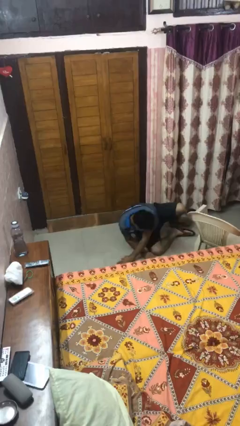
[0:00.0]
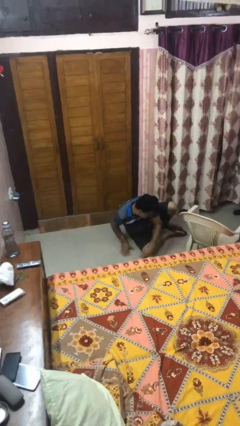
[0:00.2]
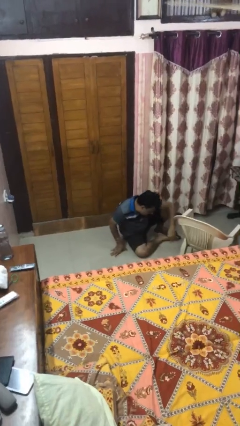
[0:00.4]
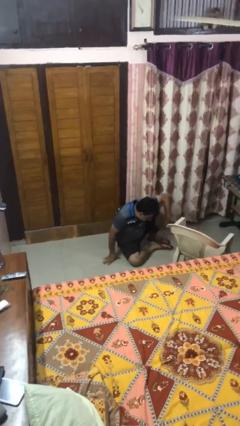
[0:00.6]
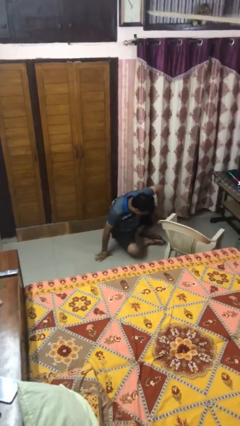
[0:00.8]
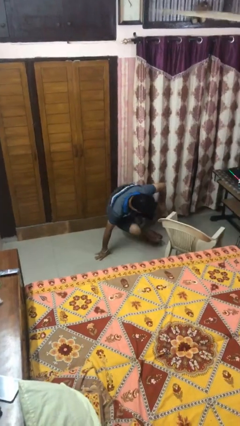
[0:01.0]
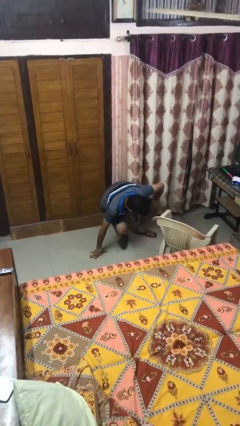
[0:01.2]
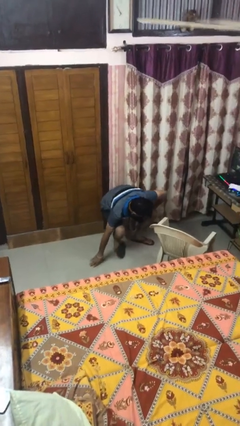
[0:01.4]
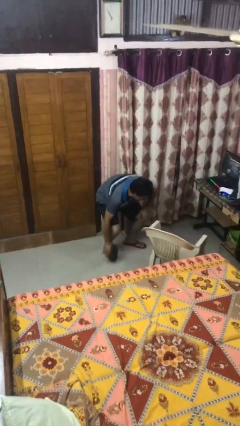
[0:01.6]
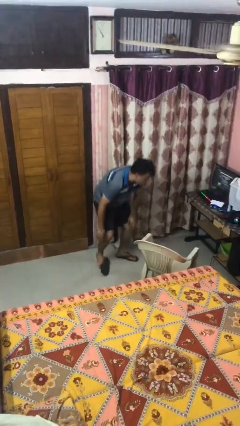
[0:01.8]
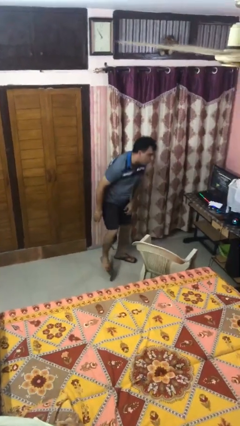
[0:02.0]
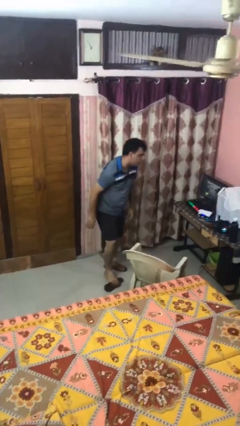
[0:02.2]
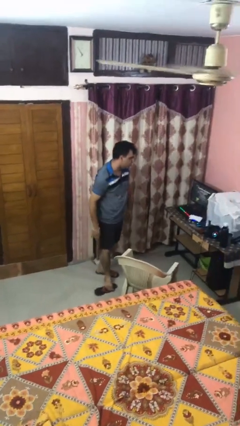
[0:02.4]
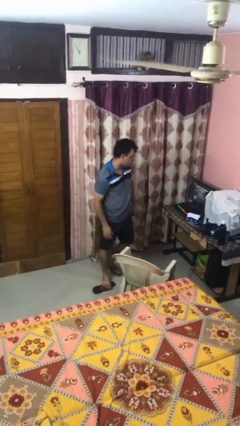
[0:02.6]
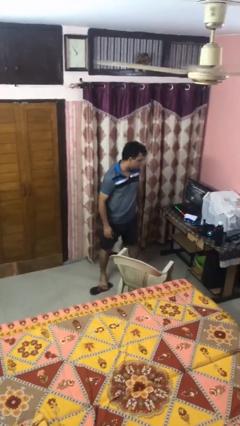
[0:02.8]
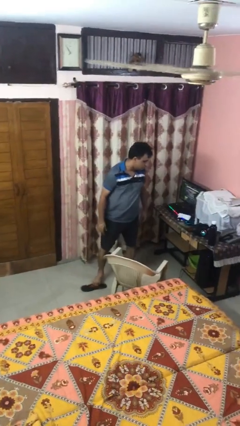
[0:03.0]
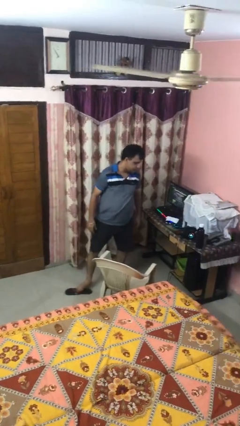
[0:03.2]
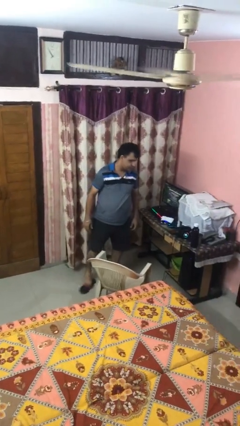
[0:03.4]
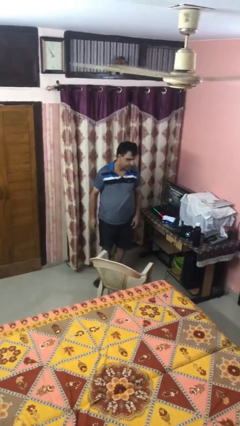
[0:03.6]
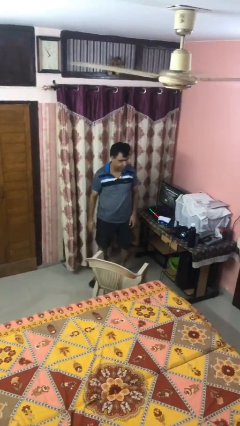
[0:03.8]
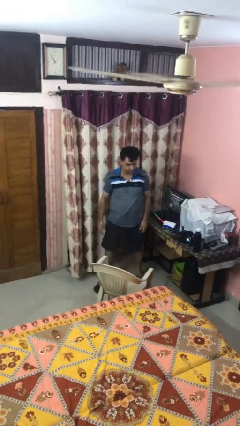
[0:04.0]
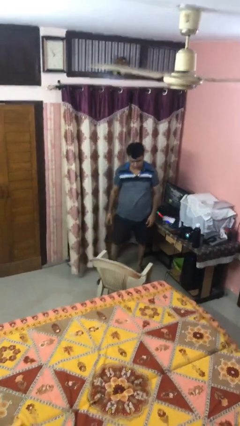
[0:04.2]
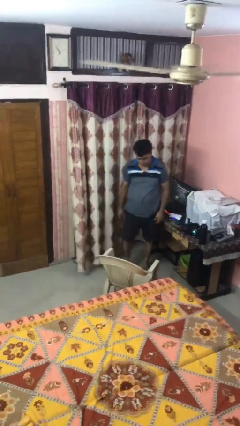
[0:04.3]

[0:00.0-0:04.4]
person stands up from floor

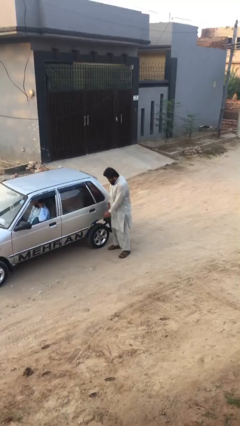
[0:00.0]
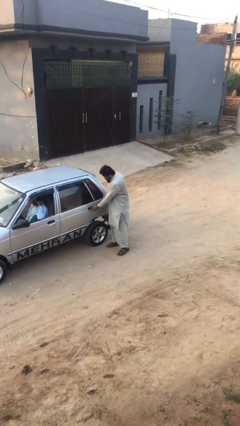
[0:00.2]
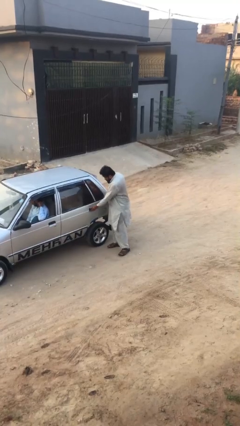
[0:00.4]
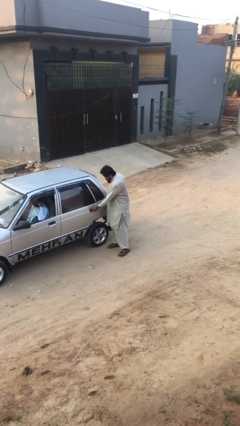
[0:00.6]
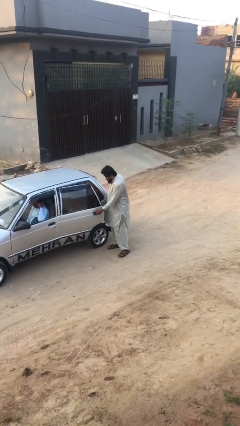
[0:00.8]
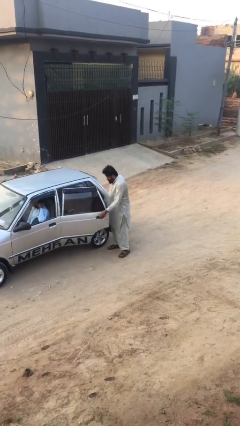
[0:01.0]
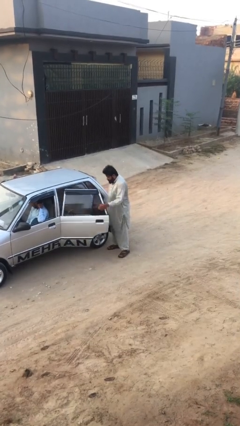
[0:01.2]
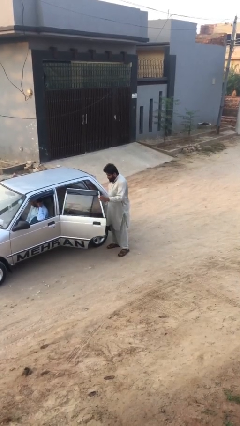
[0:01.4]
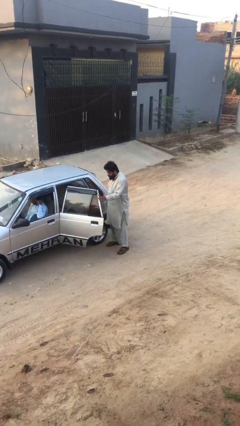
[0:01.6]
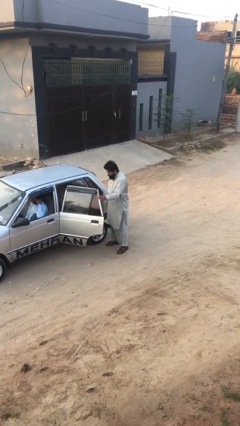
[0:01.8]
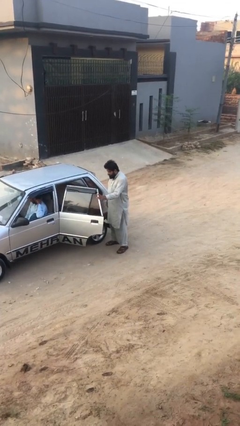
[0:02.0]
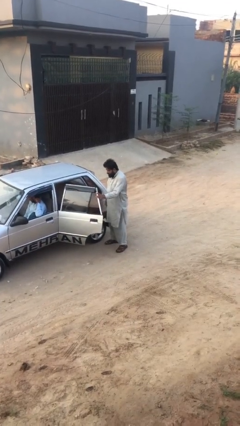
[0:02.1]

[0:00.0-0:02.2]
person opens car door

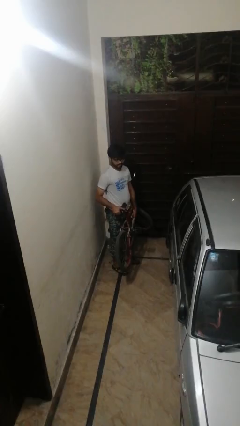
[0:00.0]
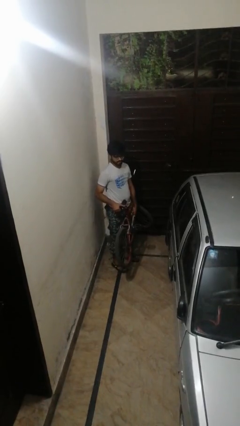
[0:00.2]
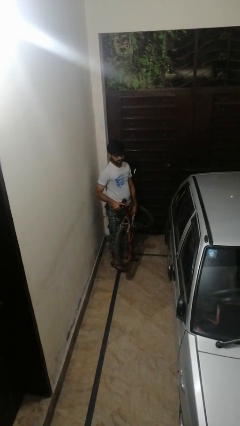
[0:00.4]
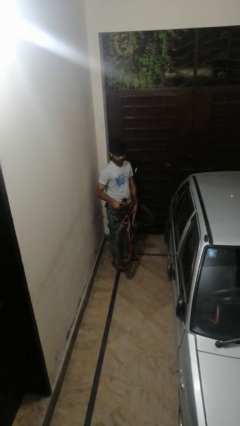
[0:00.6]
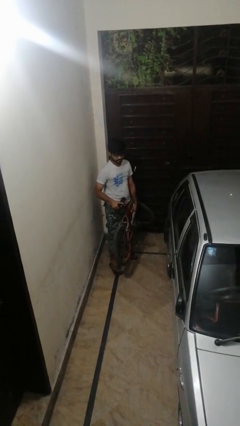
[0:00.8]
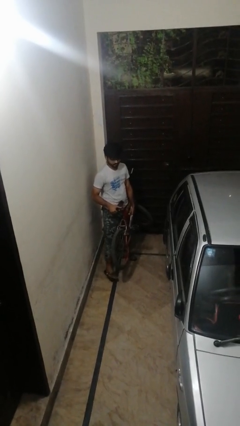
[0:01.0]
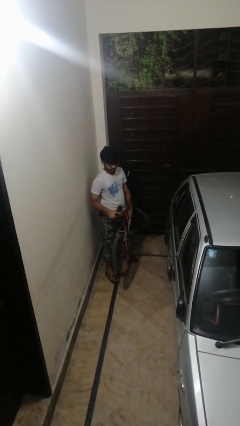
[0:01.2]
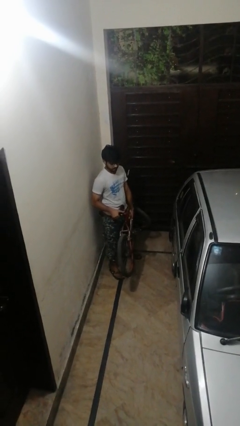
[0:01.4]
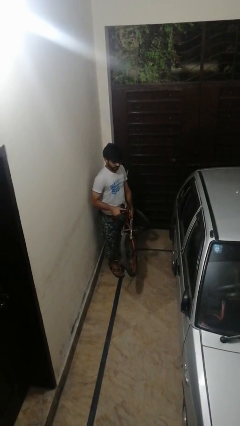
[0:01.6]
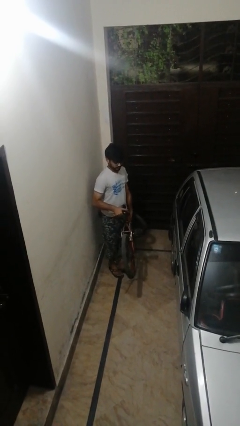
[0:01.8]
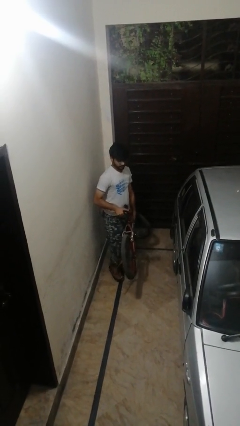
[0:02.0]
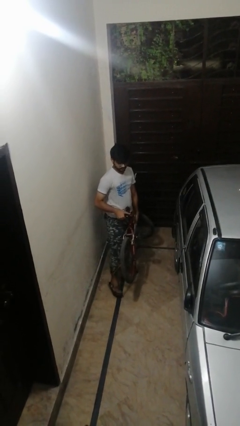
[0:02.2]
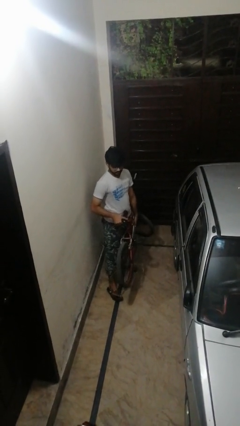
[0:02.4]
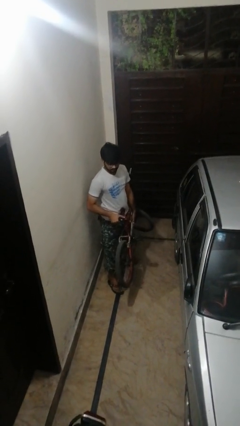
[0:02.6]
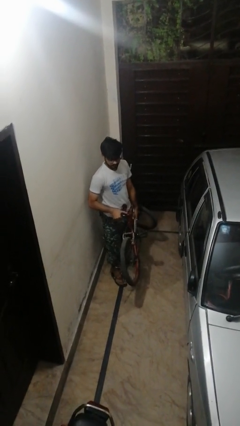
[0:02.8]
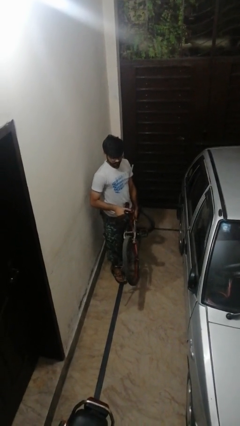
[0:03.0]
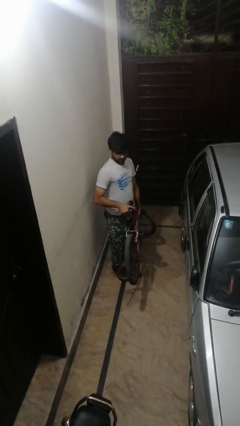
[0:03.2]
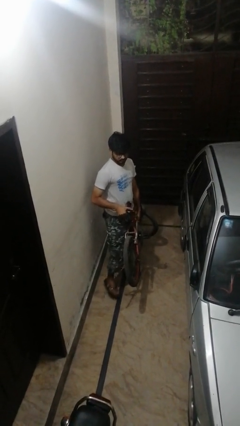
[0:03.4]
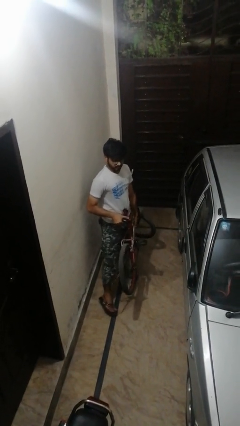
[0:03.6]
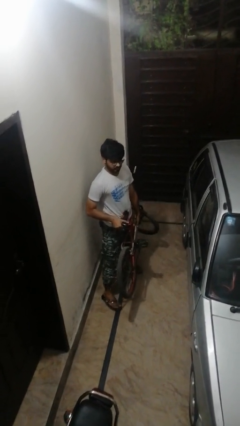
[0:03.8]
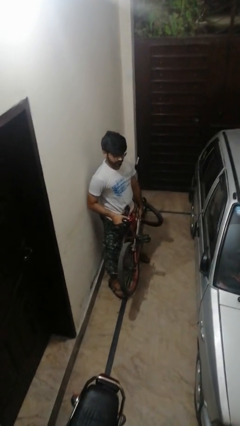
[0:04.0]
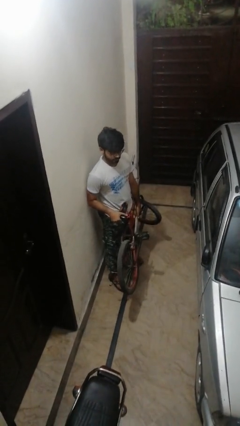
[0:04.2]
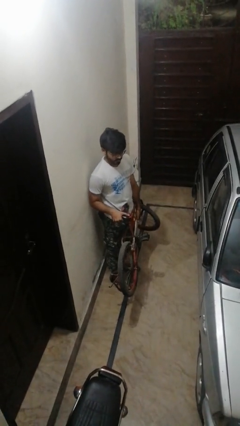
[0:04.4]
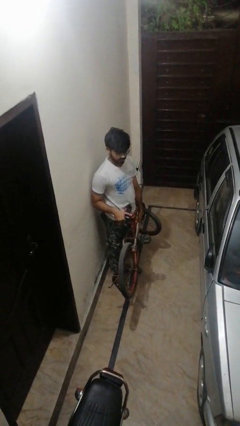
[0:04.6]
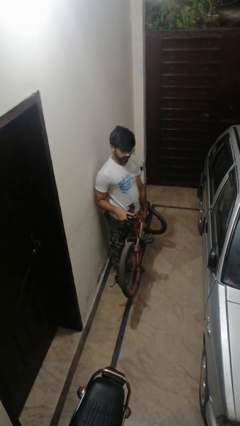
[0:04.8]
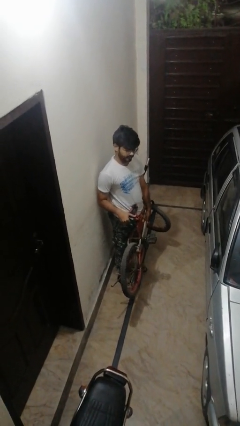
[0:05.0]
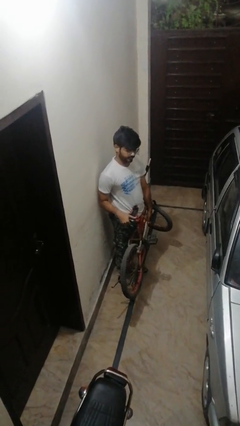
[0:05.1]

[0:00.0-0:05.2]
person carries bicycle

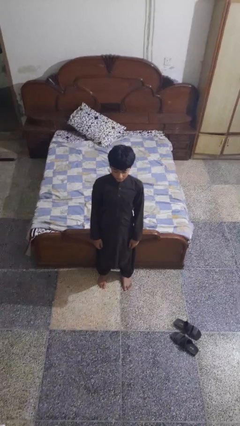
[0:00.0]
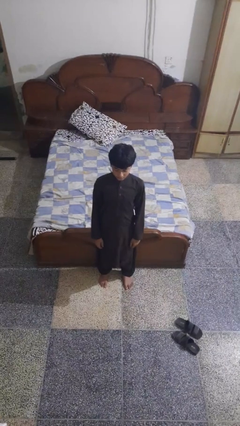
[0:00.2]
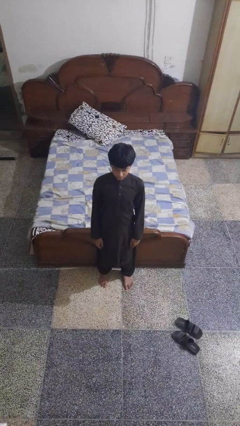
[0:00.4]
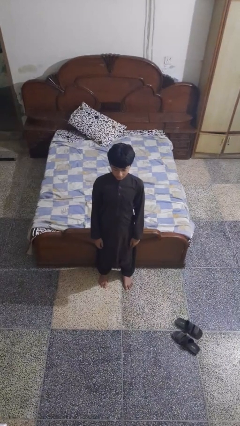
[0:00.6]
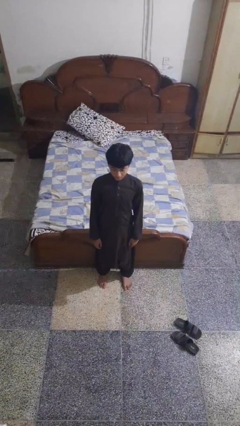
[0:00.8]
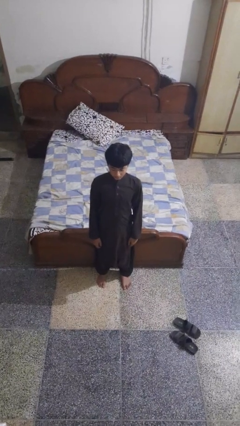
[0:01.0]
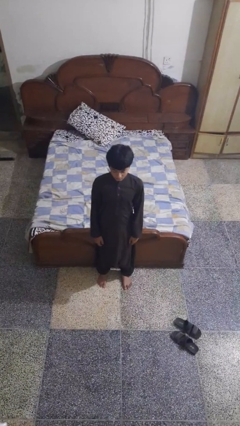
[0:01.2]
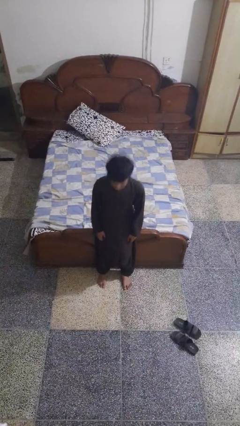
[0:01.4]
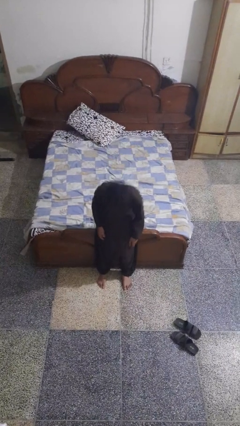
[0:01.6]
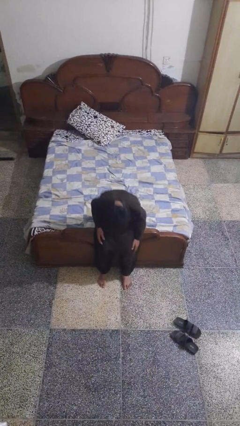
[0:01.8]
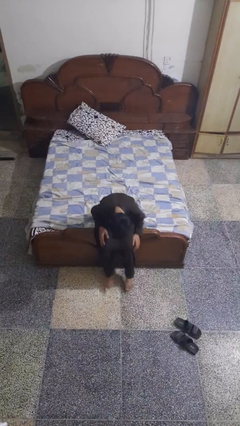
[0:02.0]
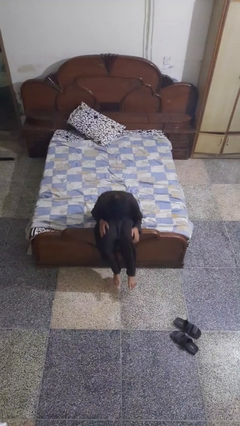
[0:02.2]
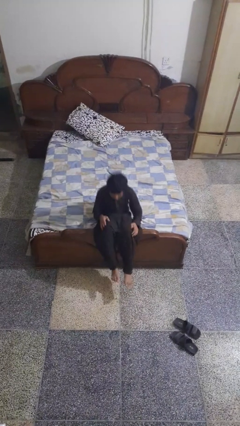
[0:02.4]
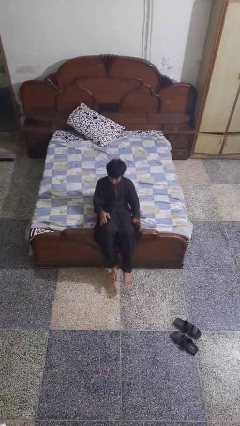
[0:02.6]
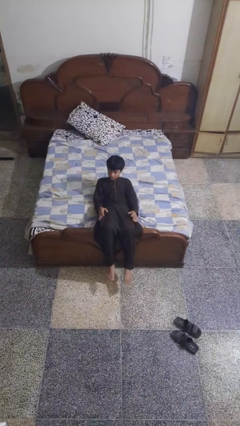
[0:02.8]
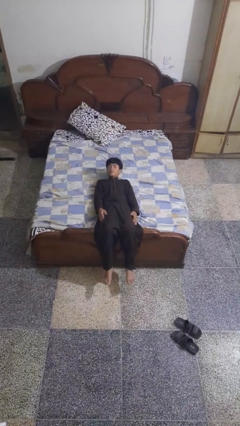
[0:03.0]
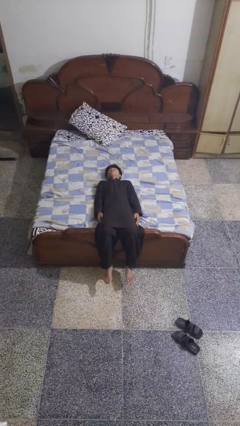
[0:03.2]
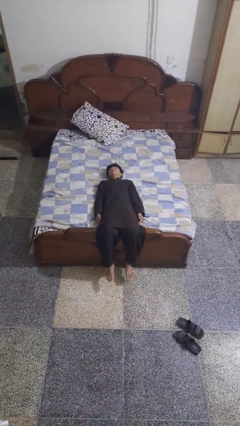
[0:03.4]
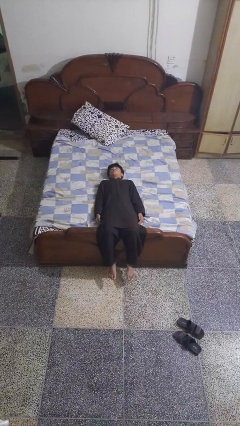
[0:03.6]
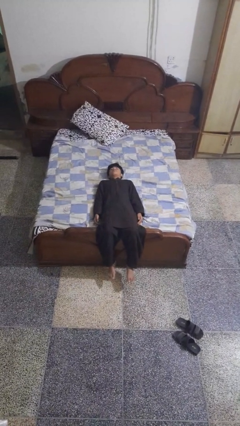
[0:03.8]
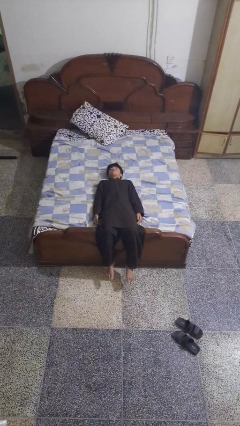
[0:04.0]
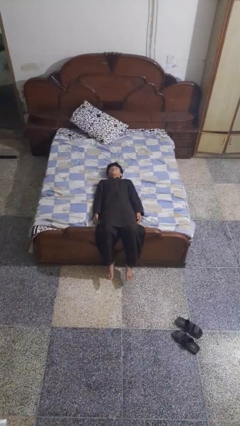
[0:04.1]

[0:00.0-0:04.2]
person lies down on bed

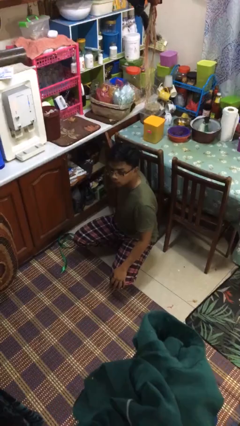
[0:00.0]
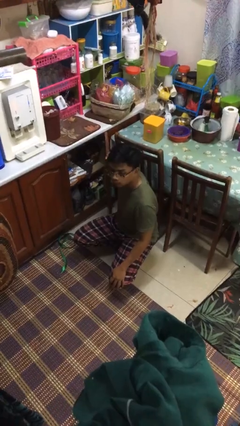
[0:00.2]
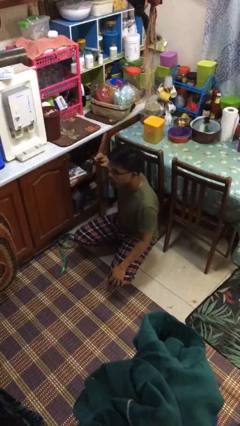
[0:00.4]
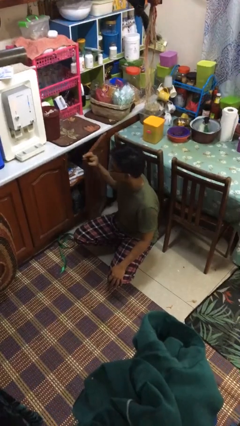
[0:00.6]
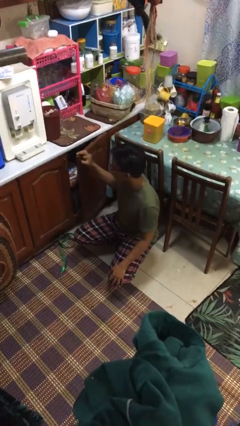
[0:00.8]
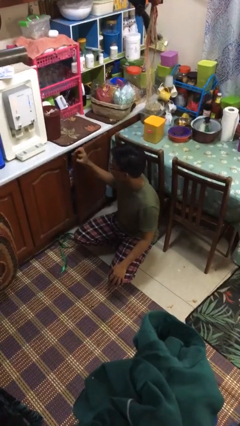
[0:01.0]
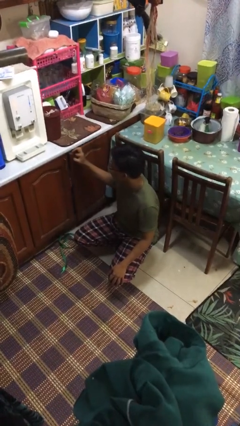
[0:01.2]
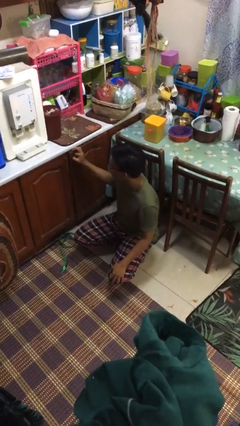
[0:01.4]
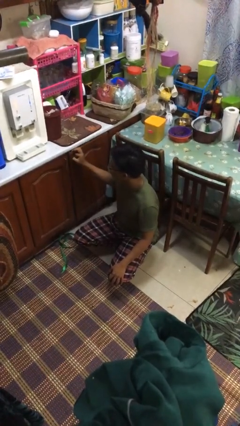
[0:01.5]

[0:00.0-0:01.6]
person closes kitchen drawer
